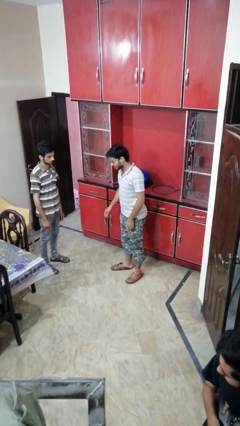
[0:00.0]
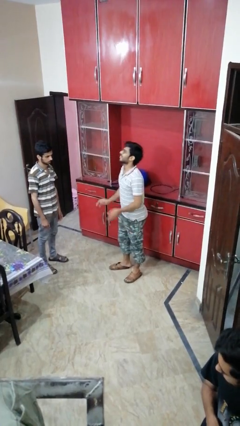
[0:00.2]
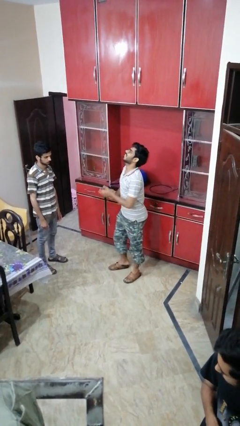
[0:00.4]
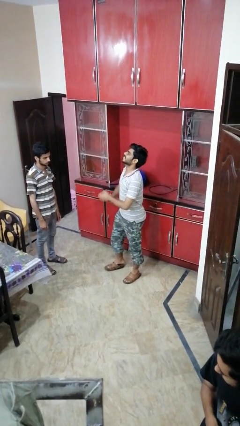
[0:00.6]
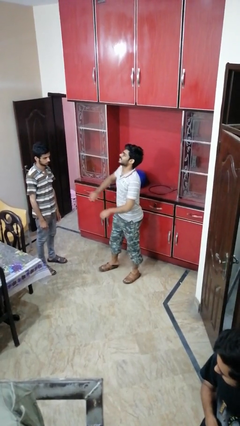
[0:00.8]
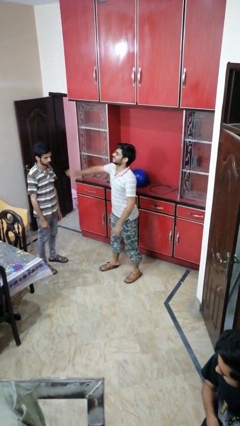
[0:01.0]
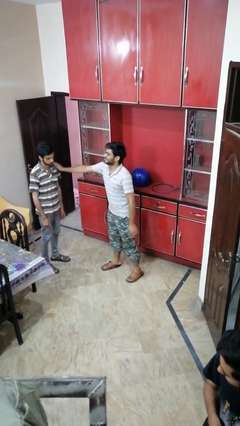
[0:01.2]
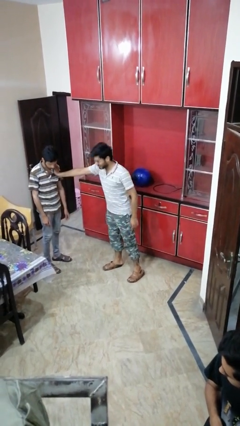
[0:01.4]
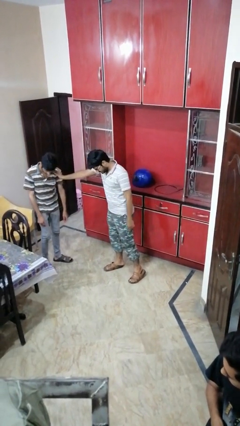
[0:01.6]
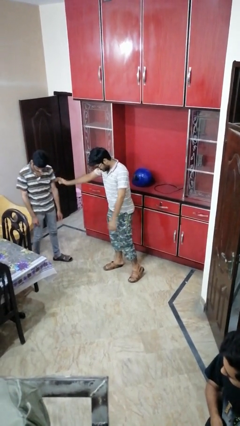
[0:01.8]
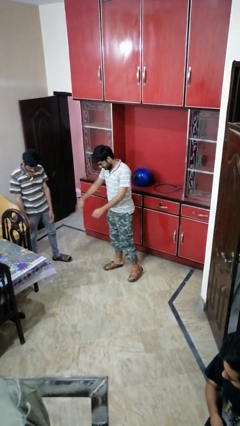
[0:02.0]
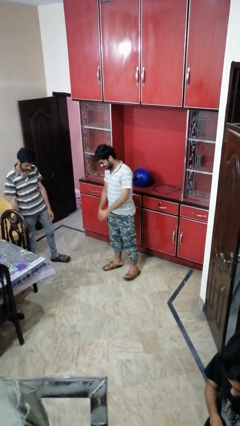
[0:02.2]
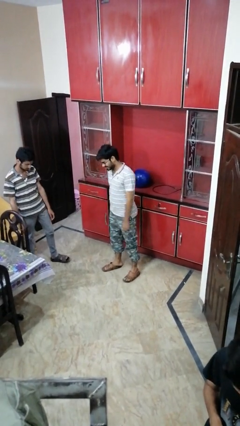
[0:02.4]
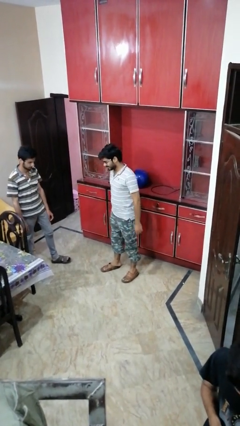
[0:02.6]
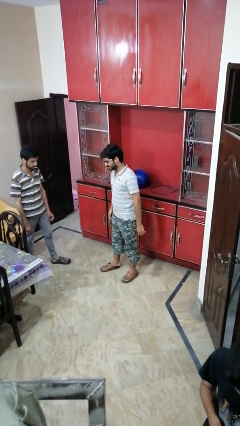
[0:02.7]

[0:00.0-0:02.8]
person shoves person

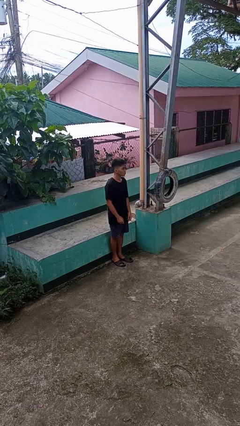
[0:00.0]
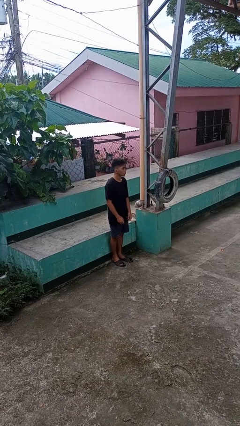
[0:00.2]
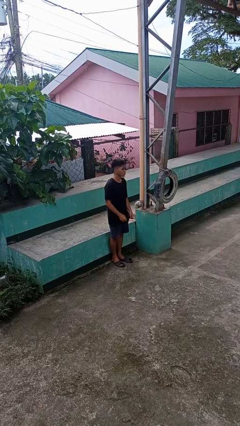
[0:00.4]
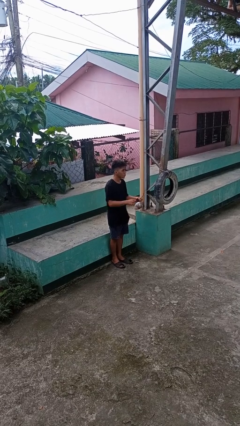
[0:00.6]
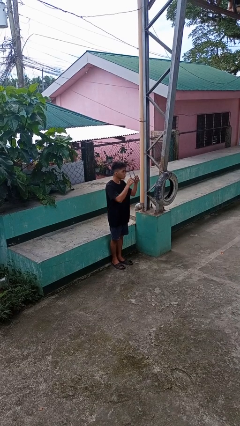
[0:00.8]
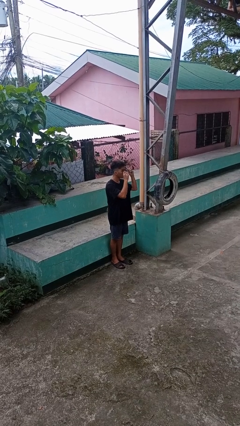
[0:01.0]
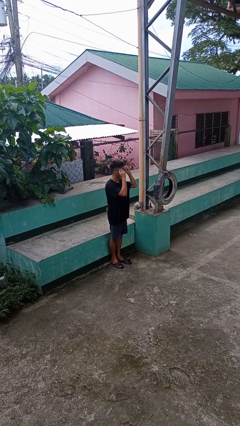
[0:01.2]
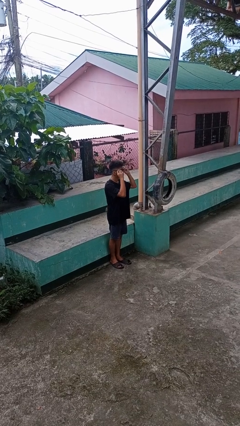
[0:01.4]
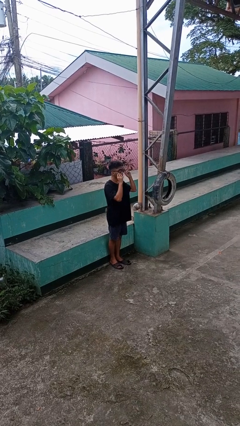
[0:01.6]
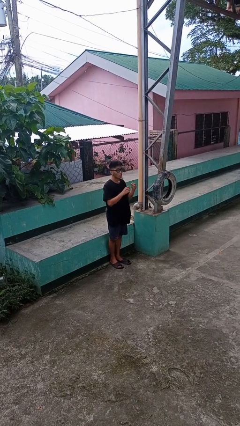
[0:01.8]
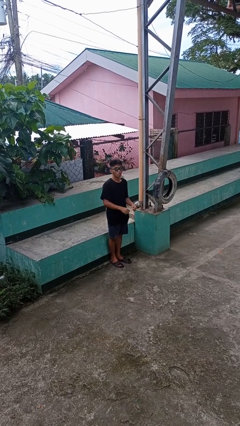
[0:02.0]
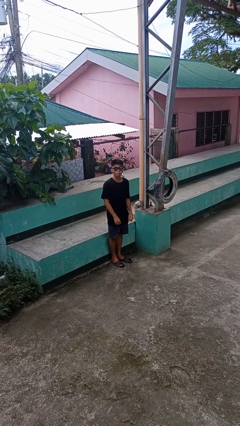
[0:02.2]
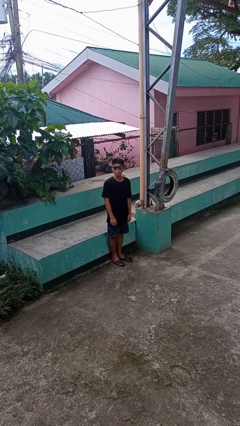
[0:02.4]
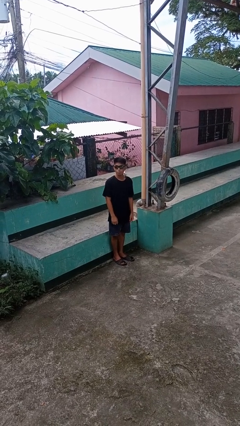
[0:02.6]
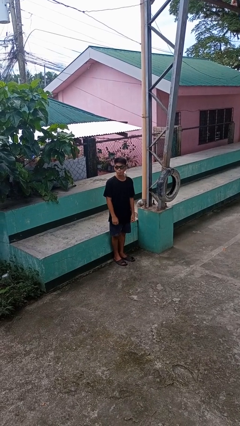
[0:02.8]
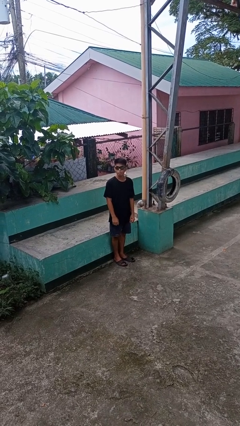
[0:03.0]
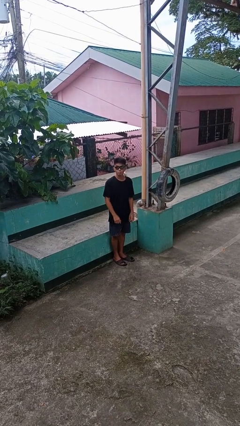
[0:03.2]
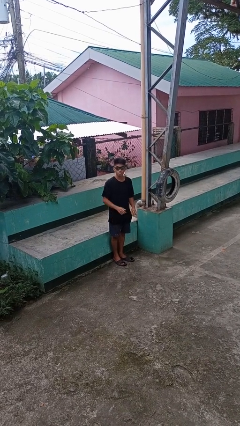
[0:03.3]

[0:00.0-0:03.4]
person puts on sunglasses

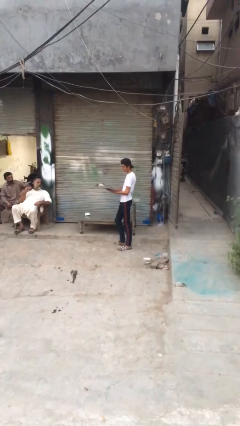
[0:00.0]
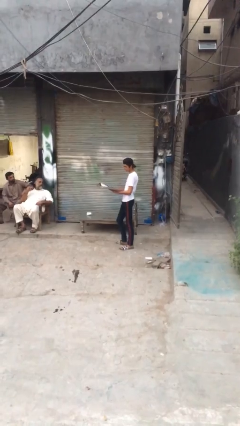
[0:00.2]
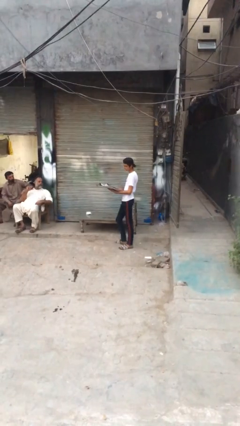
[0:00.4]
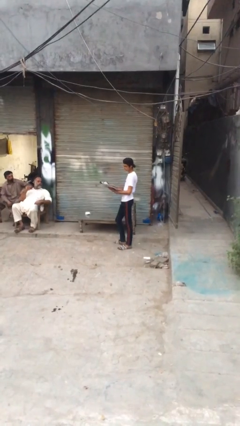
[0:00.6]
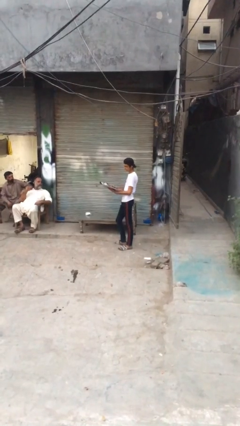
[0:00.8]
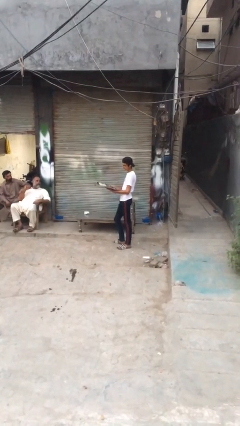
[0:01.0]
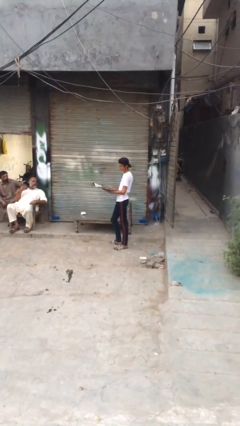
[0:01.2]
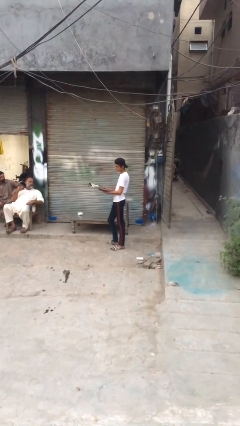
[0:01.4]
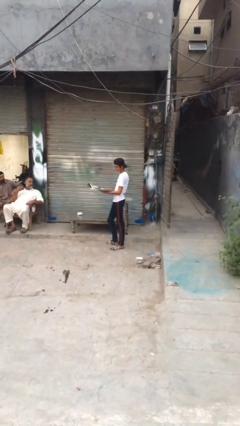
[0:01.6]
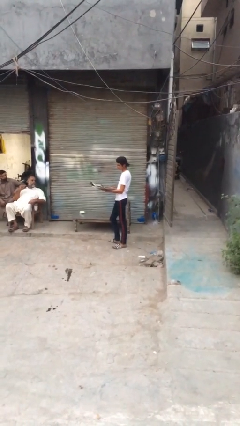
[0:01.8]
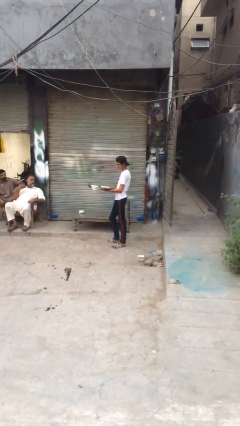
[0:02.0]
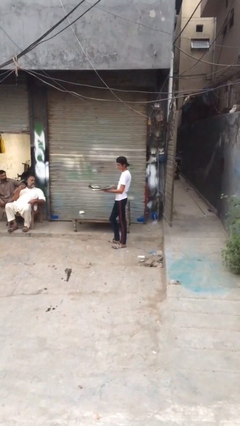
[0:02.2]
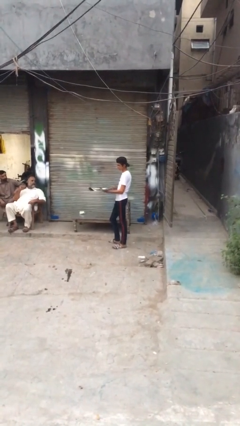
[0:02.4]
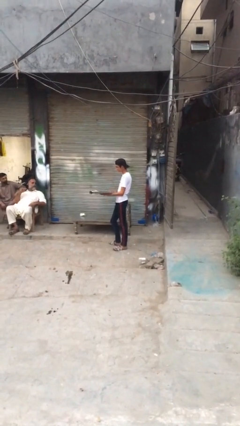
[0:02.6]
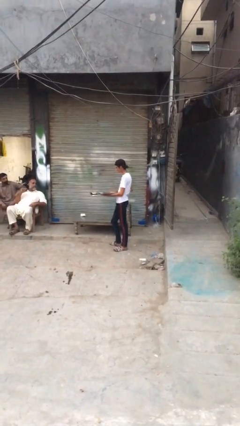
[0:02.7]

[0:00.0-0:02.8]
person reads document

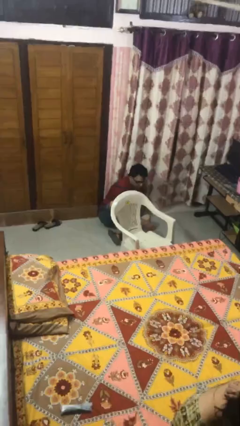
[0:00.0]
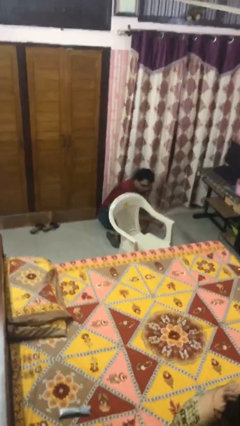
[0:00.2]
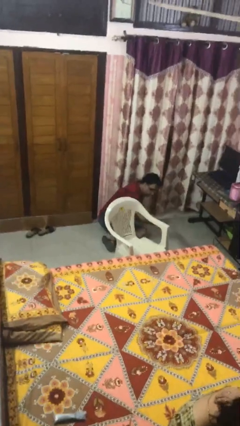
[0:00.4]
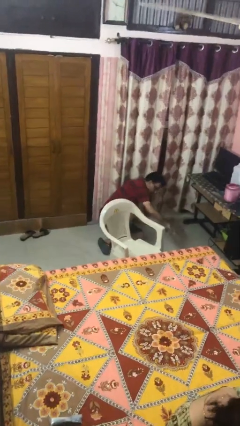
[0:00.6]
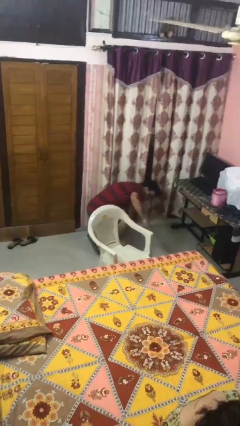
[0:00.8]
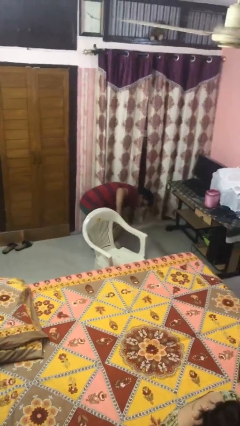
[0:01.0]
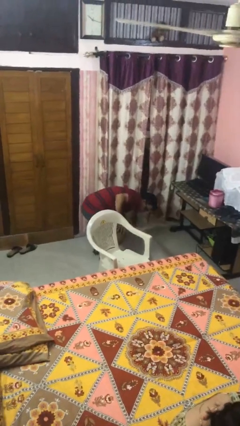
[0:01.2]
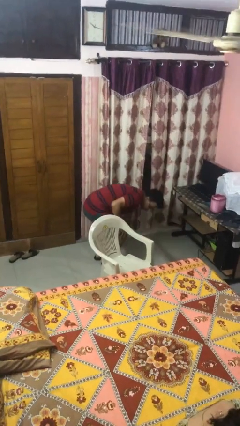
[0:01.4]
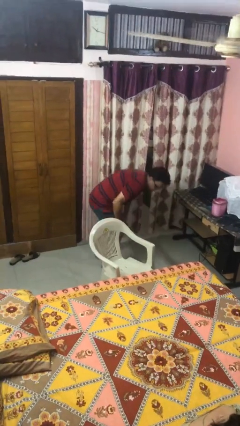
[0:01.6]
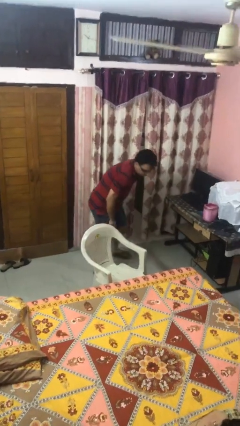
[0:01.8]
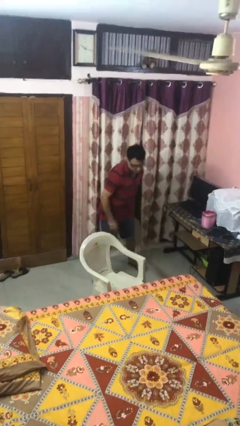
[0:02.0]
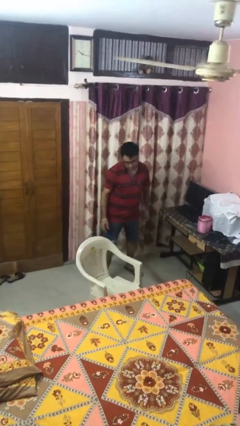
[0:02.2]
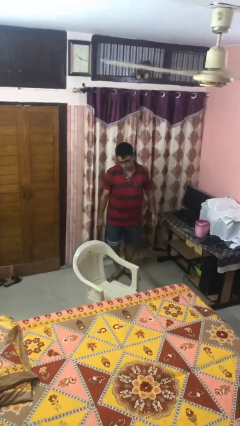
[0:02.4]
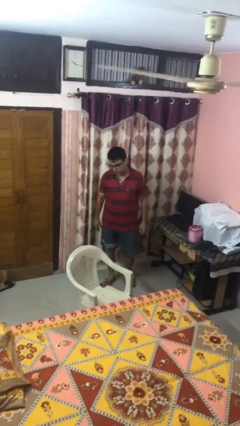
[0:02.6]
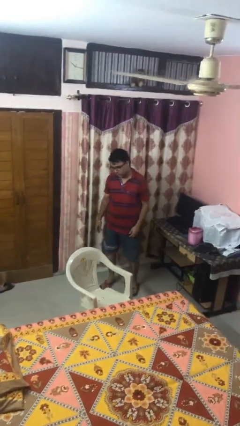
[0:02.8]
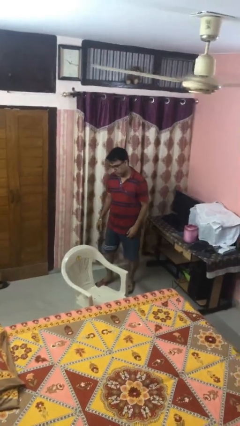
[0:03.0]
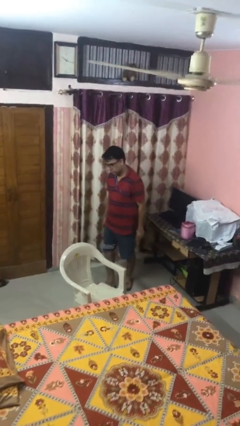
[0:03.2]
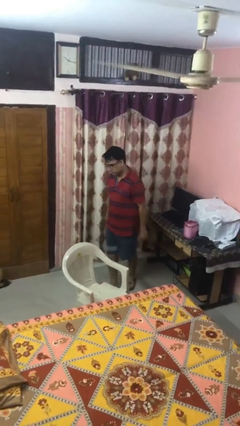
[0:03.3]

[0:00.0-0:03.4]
person stands up from floor

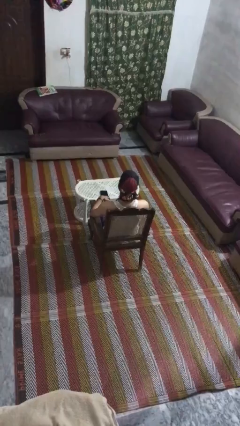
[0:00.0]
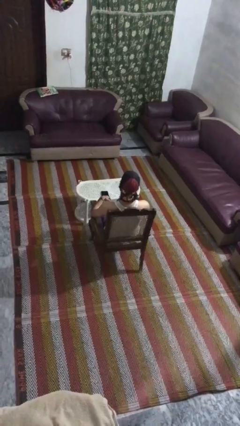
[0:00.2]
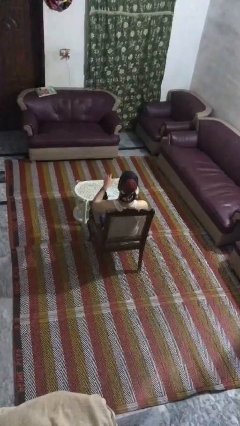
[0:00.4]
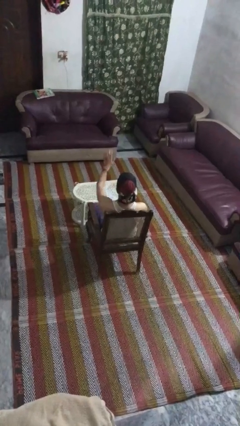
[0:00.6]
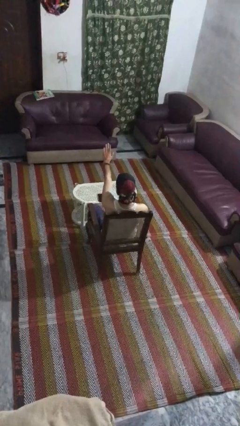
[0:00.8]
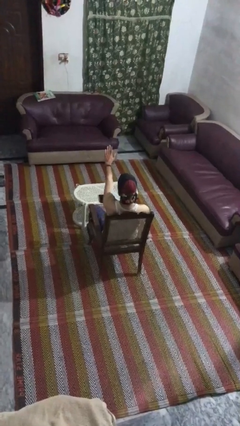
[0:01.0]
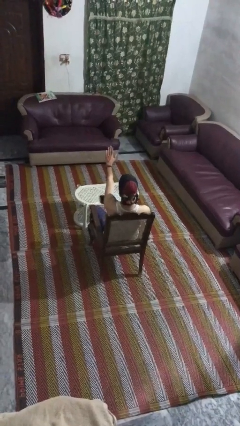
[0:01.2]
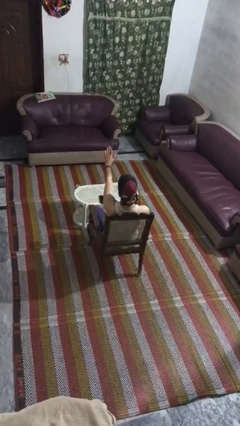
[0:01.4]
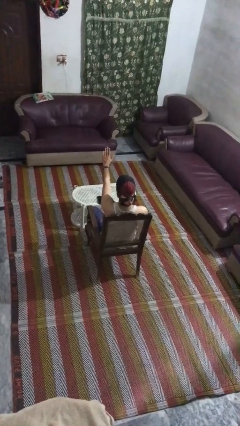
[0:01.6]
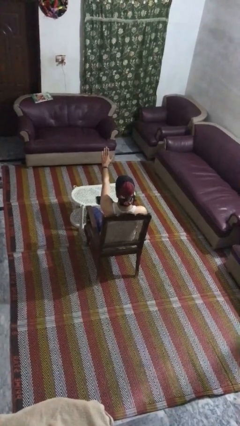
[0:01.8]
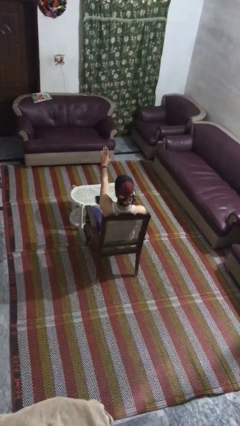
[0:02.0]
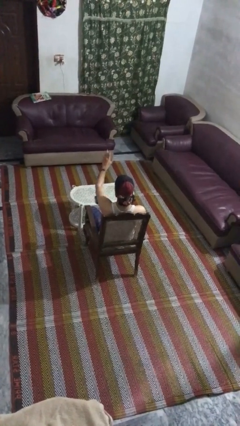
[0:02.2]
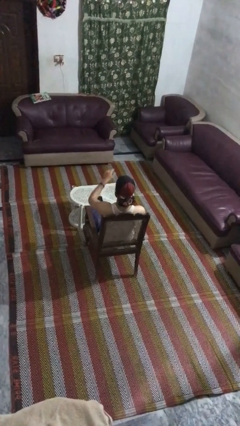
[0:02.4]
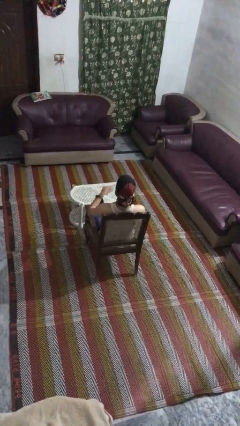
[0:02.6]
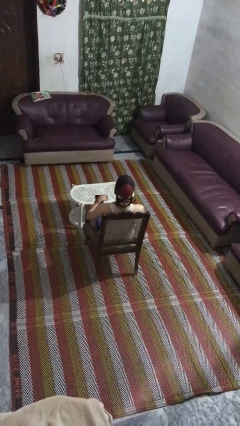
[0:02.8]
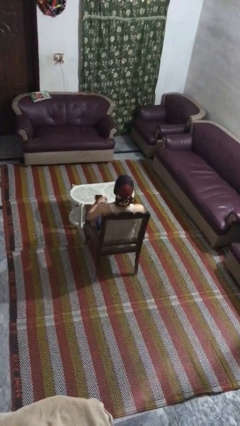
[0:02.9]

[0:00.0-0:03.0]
person gestures stop

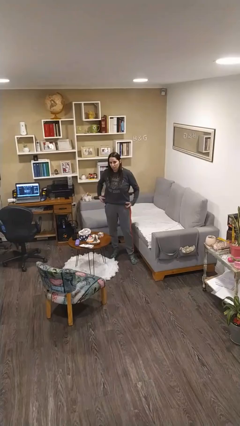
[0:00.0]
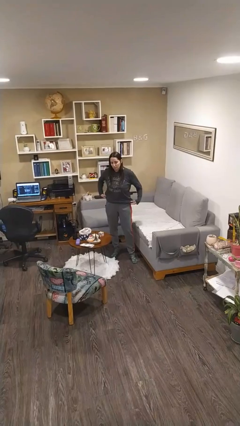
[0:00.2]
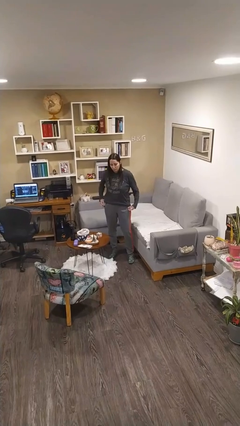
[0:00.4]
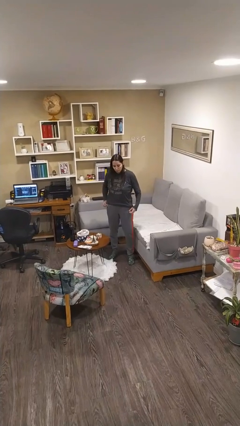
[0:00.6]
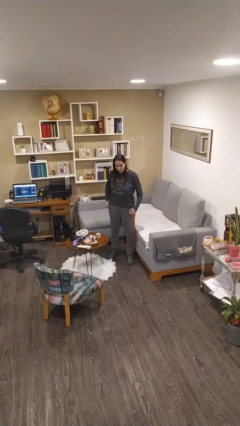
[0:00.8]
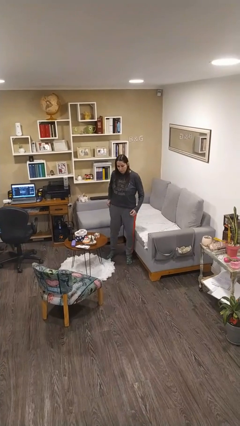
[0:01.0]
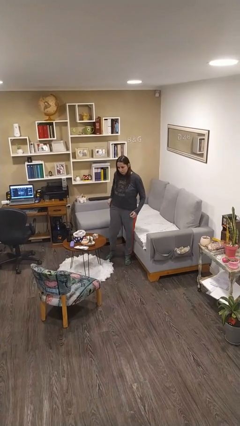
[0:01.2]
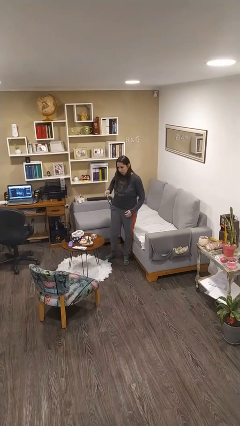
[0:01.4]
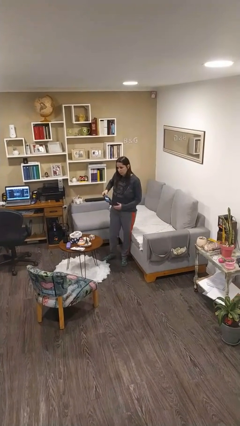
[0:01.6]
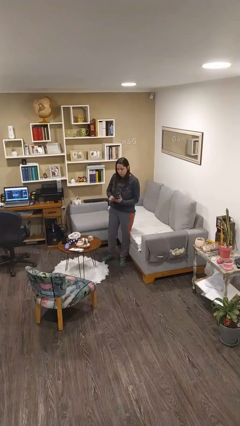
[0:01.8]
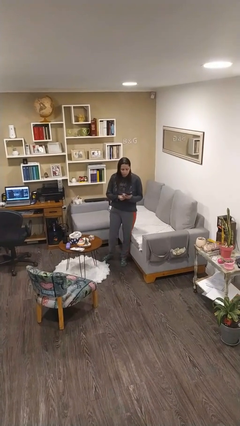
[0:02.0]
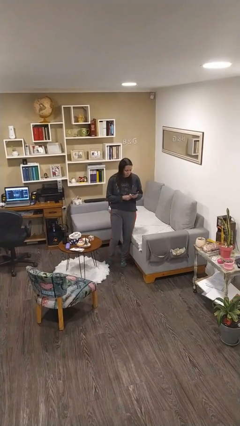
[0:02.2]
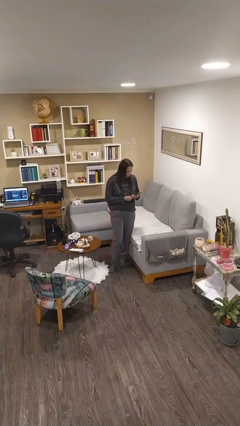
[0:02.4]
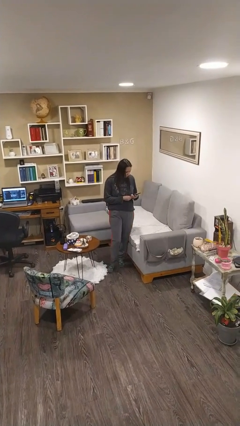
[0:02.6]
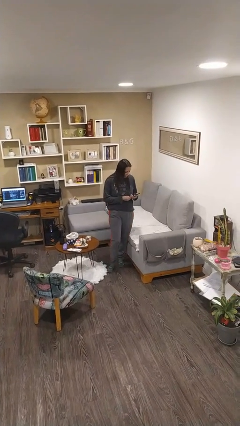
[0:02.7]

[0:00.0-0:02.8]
person takes phone from pocket
